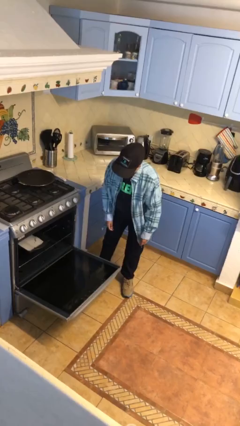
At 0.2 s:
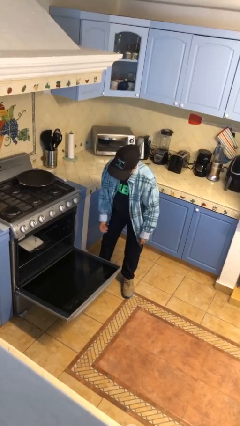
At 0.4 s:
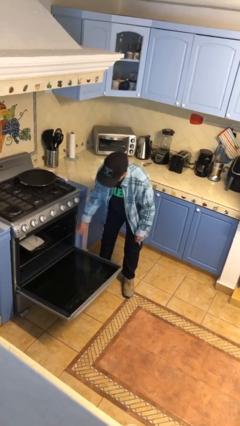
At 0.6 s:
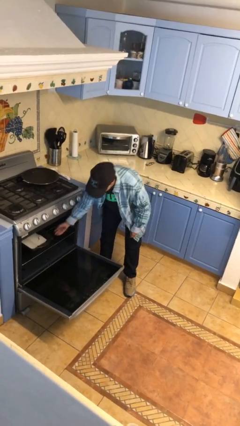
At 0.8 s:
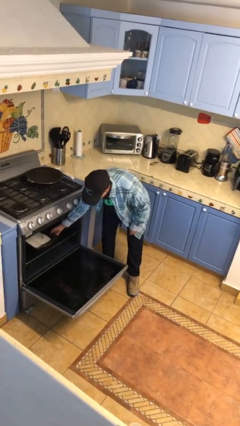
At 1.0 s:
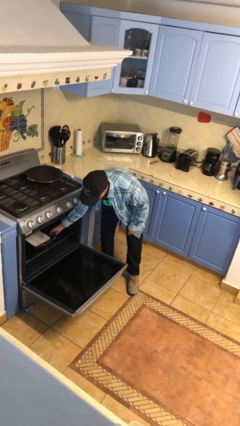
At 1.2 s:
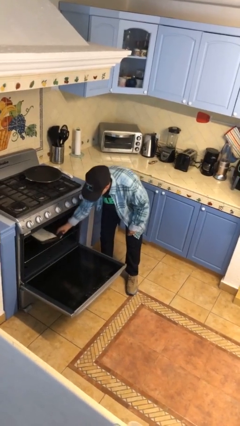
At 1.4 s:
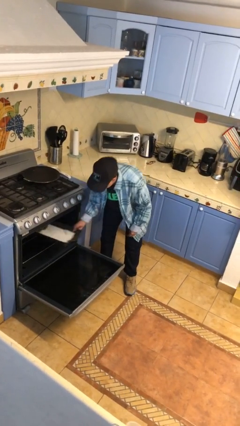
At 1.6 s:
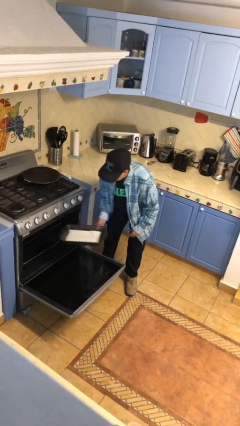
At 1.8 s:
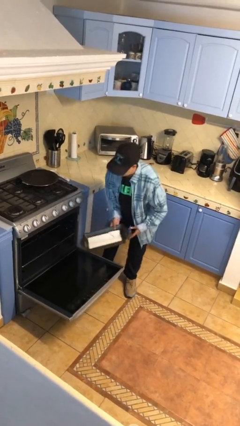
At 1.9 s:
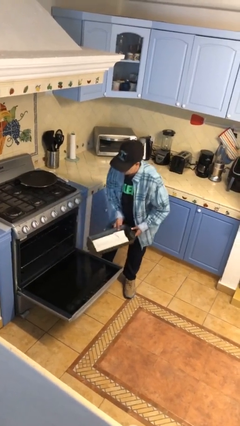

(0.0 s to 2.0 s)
person takes object from oven

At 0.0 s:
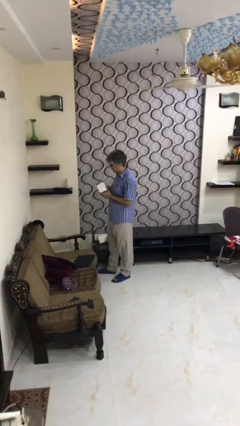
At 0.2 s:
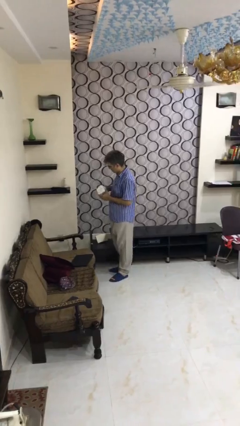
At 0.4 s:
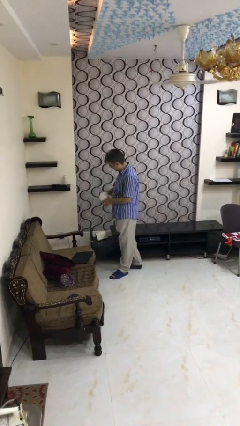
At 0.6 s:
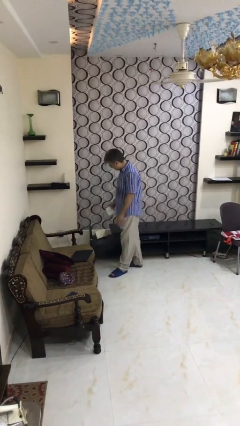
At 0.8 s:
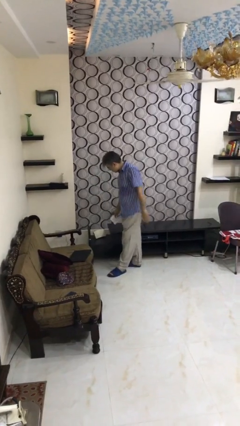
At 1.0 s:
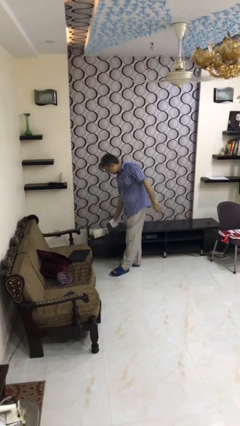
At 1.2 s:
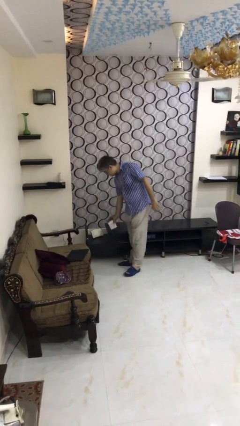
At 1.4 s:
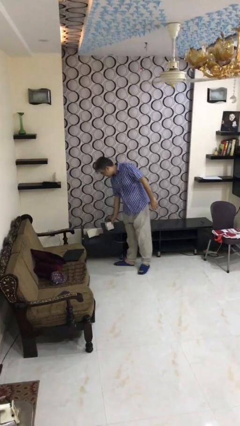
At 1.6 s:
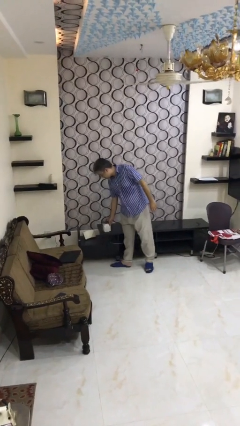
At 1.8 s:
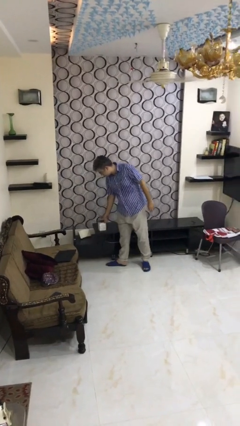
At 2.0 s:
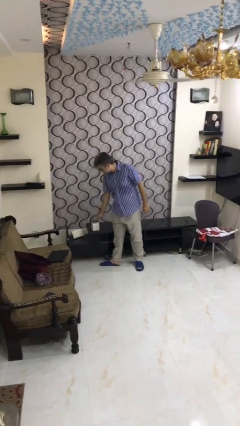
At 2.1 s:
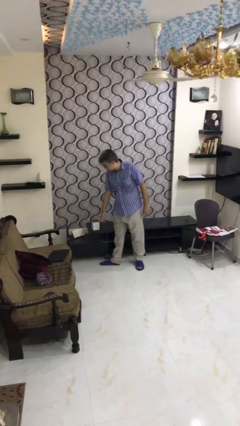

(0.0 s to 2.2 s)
person puts down object on table

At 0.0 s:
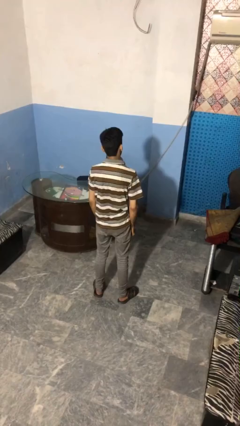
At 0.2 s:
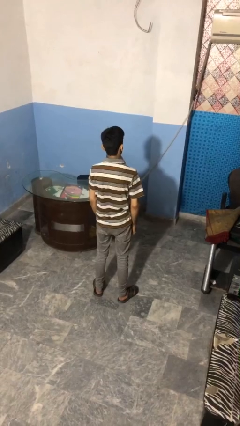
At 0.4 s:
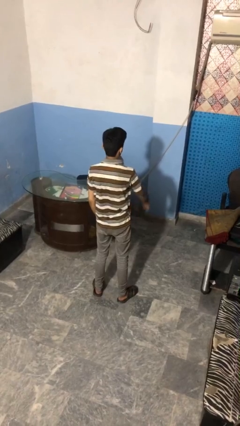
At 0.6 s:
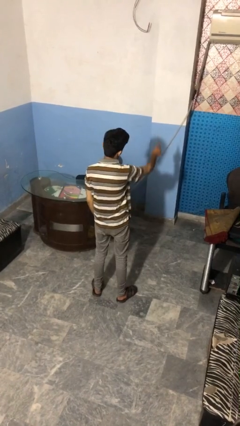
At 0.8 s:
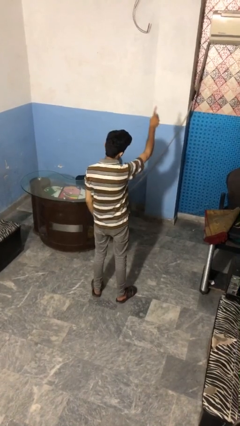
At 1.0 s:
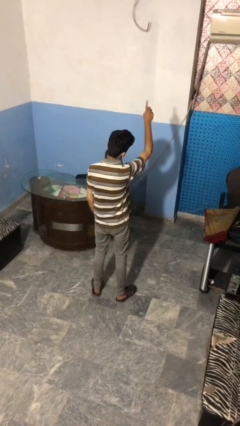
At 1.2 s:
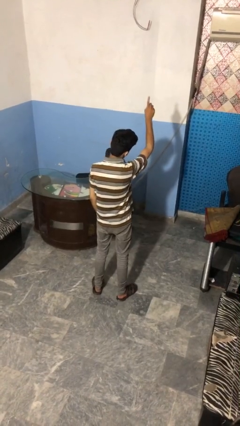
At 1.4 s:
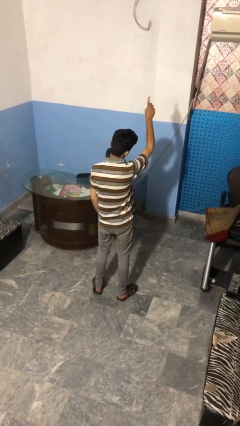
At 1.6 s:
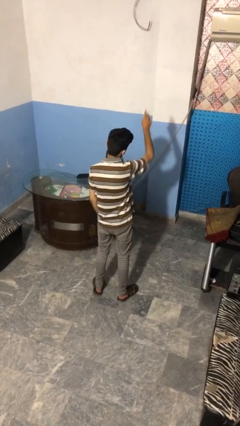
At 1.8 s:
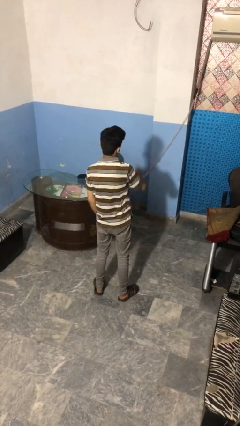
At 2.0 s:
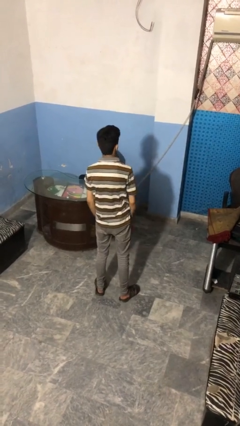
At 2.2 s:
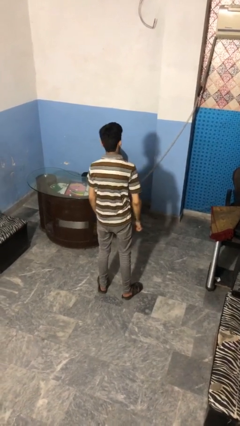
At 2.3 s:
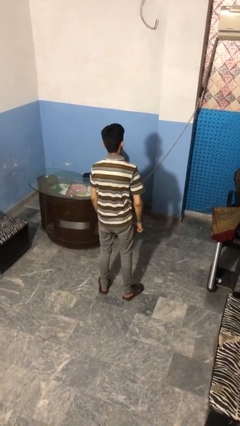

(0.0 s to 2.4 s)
person gestures number one

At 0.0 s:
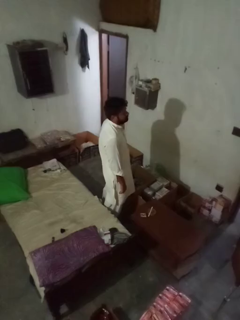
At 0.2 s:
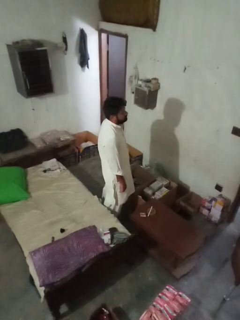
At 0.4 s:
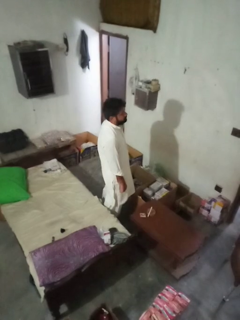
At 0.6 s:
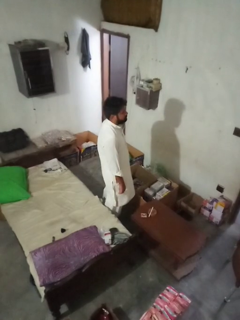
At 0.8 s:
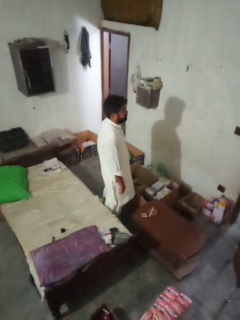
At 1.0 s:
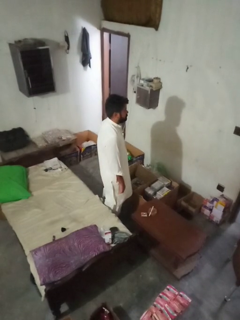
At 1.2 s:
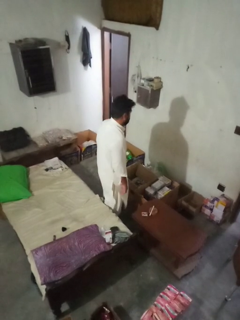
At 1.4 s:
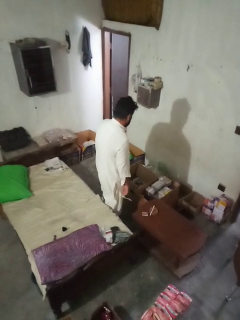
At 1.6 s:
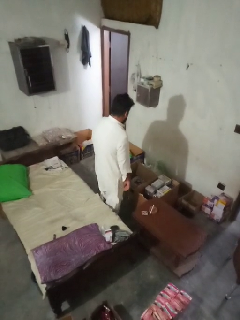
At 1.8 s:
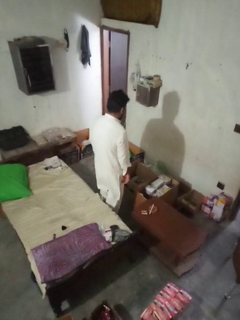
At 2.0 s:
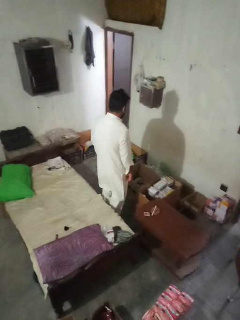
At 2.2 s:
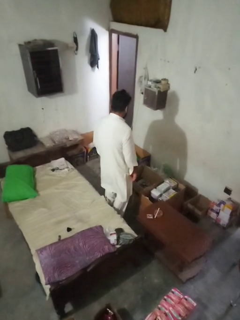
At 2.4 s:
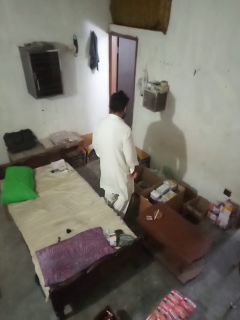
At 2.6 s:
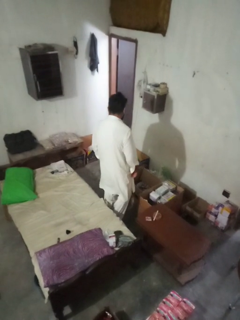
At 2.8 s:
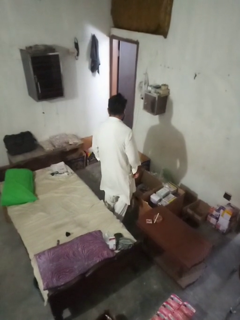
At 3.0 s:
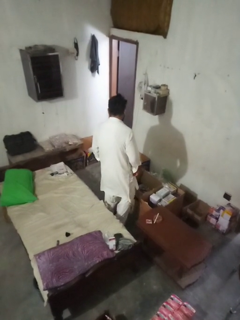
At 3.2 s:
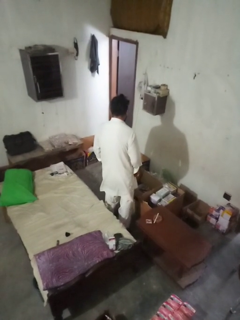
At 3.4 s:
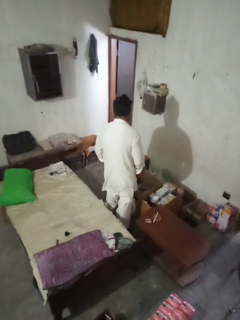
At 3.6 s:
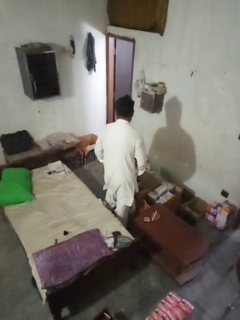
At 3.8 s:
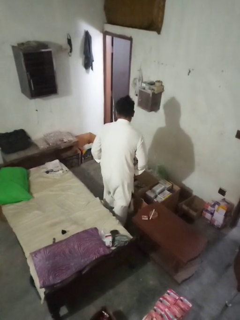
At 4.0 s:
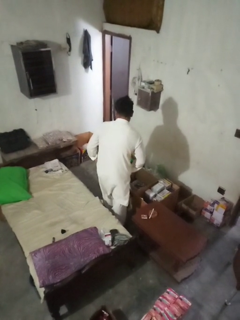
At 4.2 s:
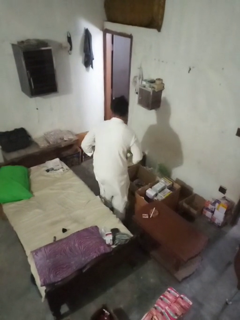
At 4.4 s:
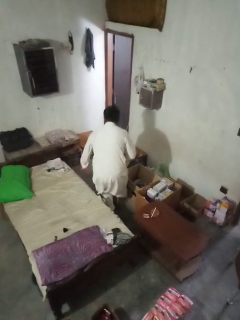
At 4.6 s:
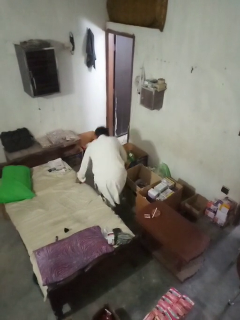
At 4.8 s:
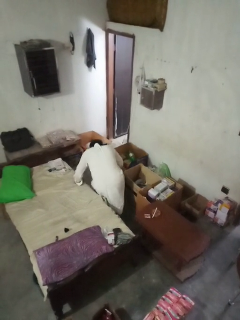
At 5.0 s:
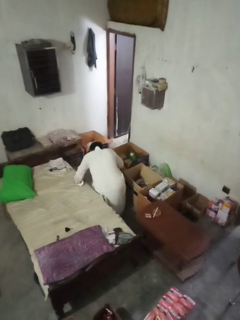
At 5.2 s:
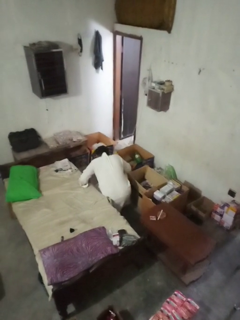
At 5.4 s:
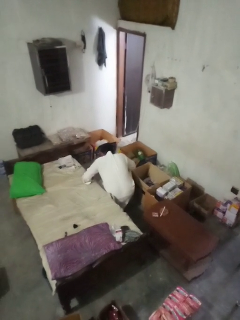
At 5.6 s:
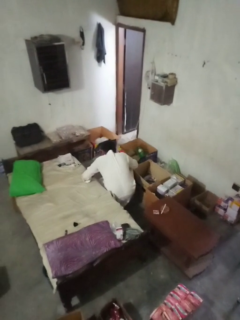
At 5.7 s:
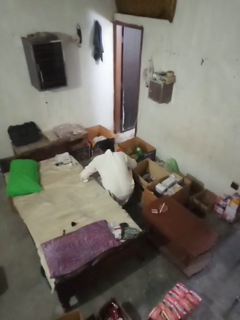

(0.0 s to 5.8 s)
person falls from bed

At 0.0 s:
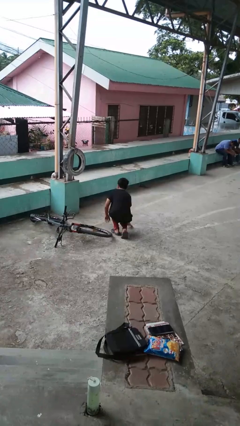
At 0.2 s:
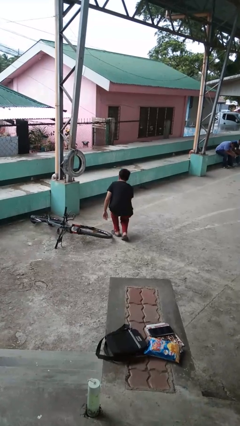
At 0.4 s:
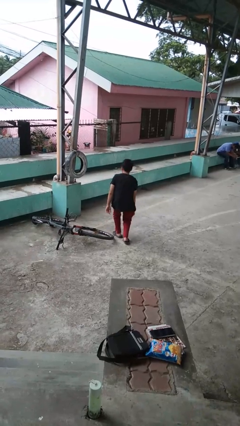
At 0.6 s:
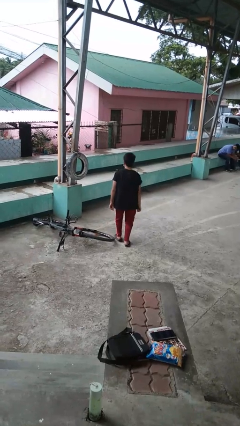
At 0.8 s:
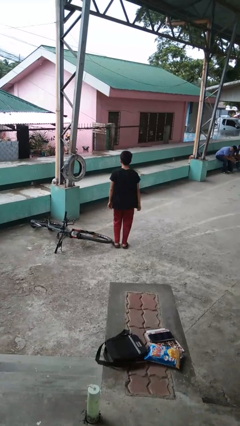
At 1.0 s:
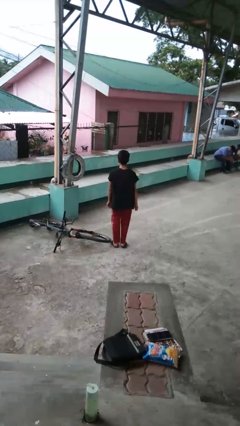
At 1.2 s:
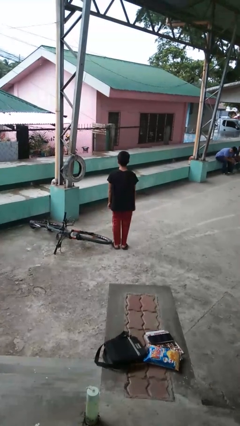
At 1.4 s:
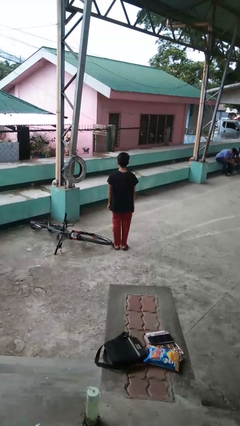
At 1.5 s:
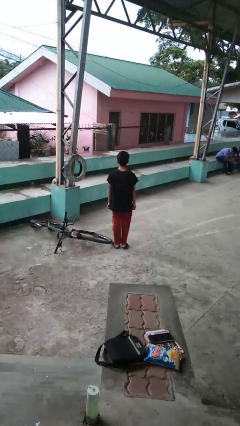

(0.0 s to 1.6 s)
person stands up from floor

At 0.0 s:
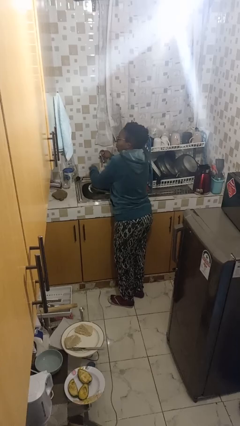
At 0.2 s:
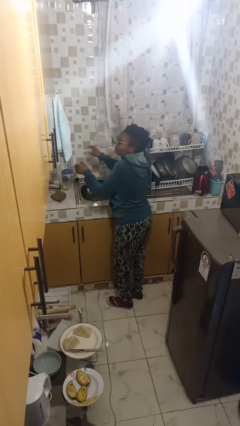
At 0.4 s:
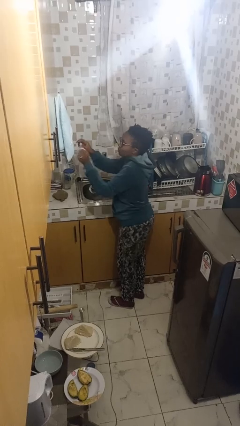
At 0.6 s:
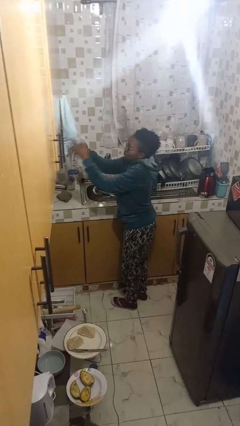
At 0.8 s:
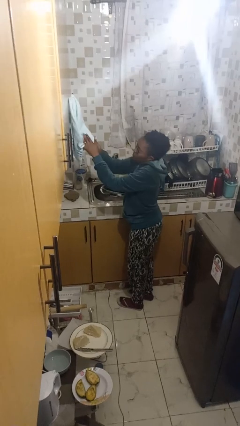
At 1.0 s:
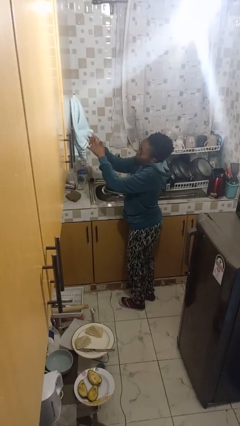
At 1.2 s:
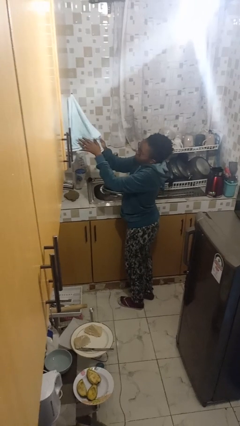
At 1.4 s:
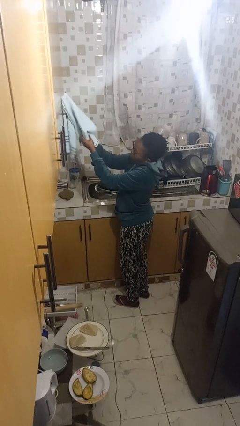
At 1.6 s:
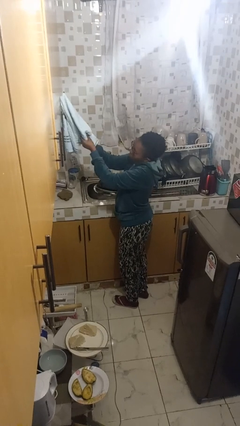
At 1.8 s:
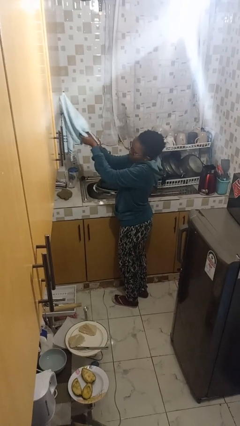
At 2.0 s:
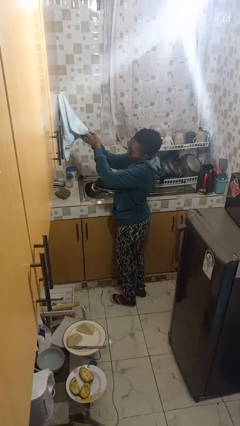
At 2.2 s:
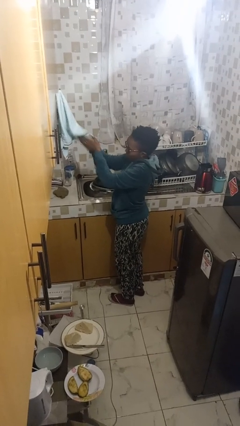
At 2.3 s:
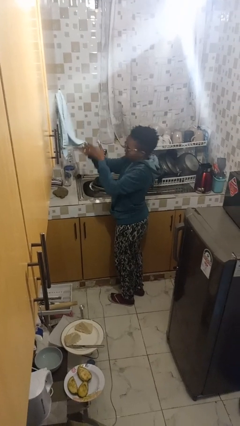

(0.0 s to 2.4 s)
person dries hands with towel

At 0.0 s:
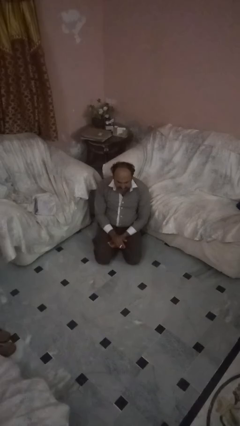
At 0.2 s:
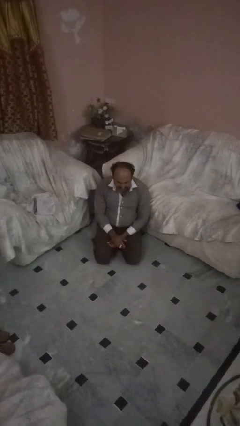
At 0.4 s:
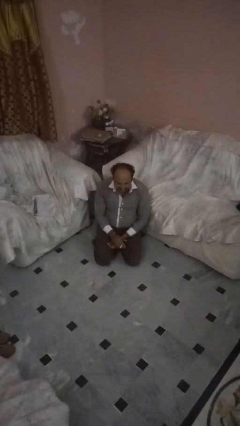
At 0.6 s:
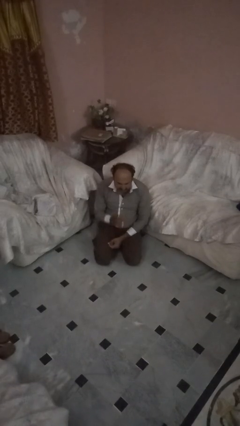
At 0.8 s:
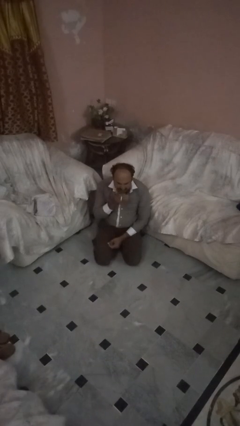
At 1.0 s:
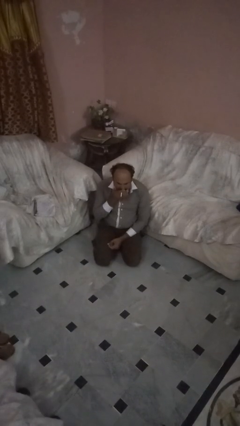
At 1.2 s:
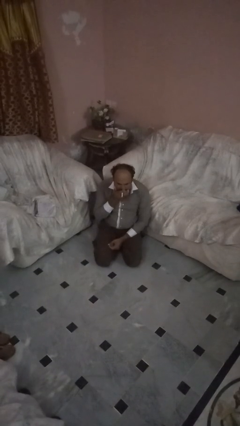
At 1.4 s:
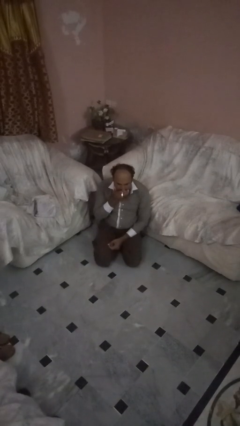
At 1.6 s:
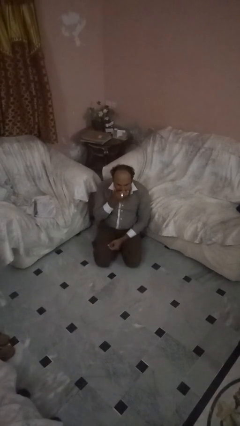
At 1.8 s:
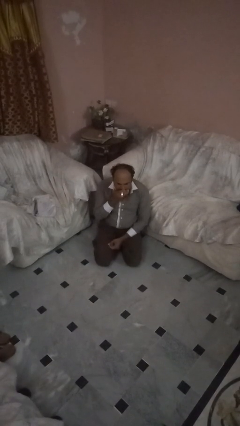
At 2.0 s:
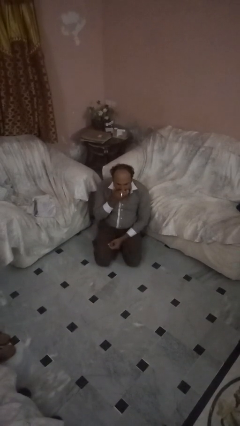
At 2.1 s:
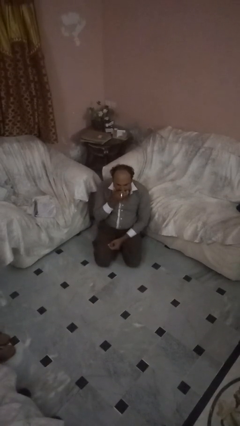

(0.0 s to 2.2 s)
person vapes
